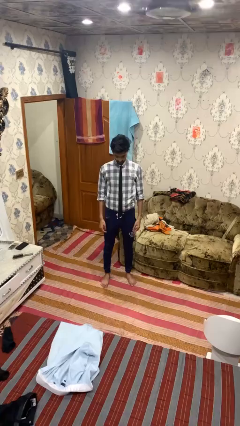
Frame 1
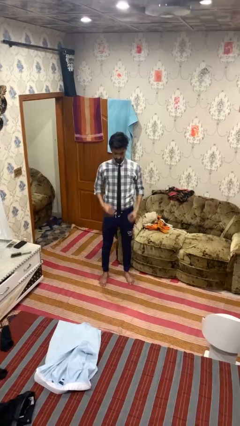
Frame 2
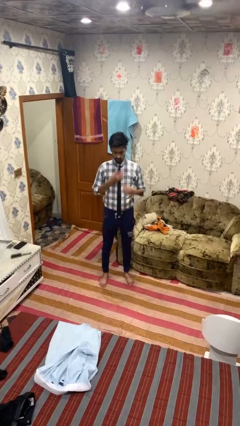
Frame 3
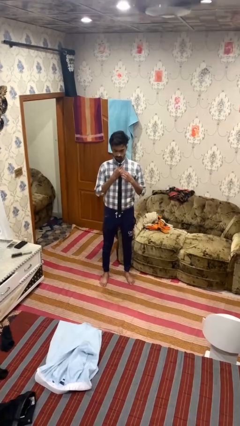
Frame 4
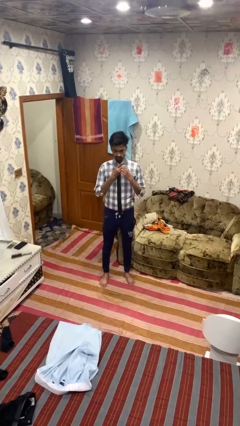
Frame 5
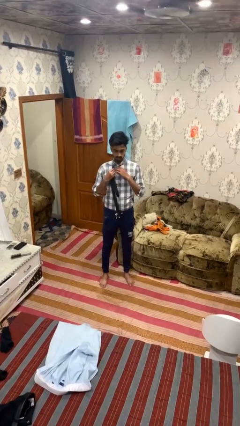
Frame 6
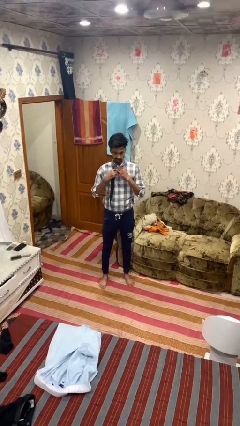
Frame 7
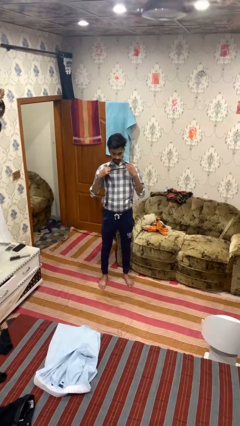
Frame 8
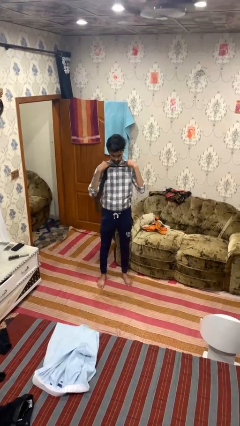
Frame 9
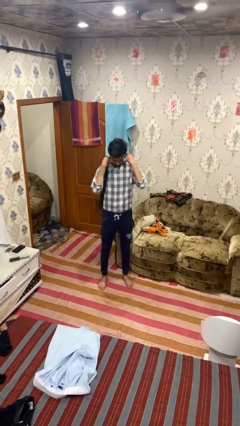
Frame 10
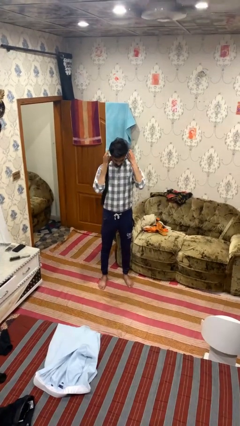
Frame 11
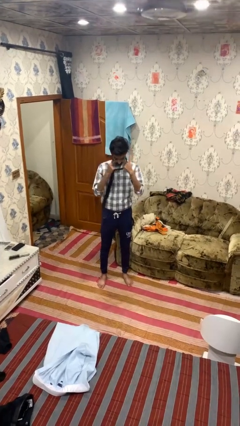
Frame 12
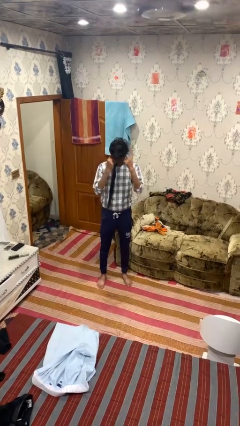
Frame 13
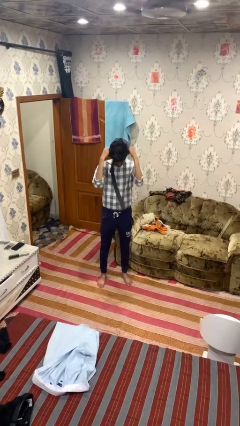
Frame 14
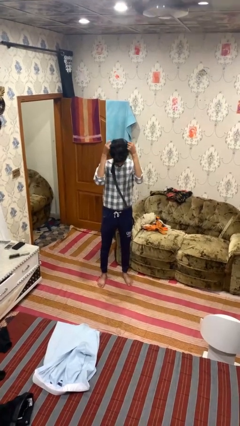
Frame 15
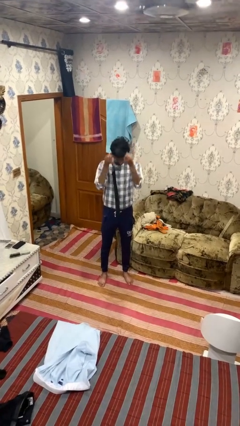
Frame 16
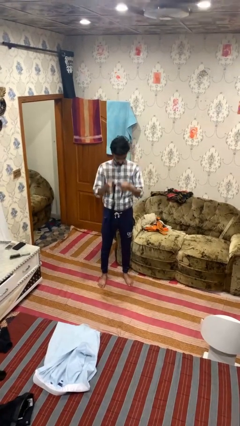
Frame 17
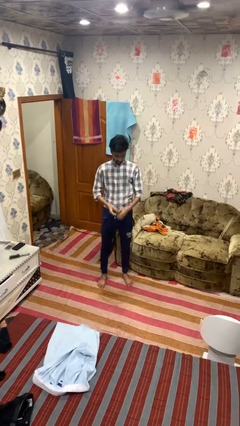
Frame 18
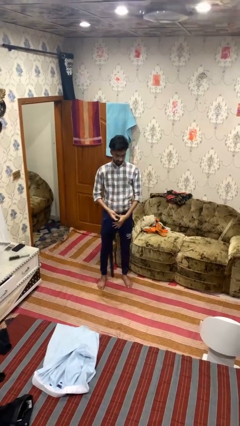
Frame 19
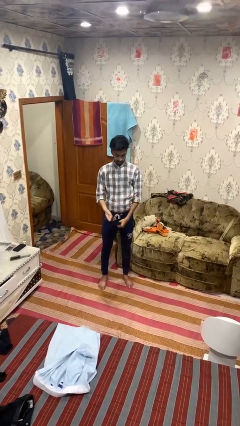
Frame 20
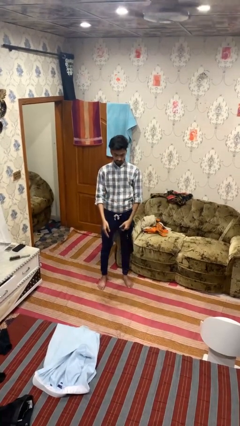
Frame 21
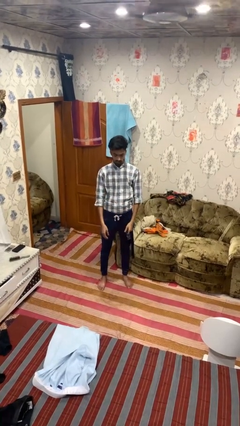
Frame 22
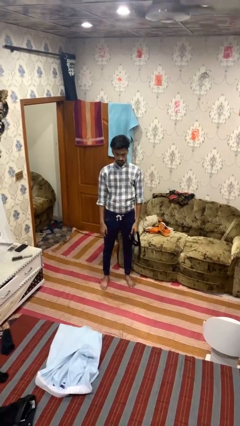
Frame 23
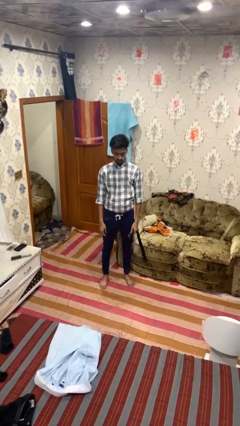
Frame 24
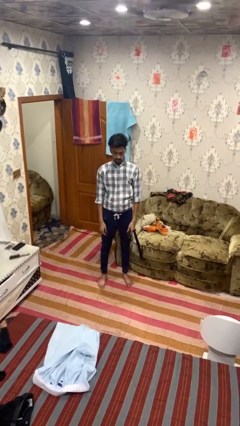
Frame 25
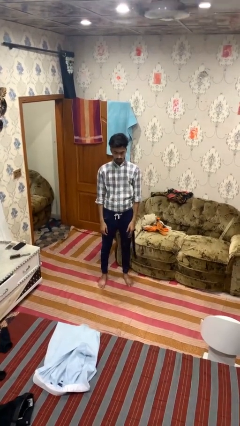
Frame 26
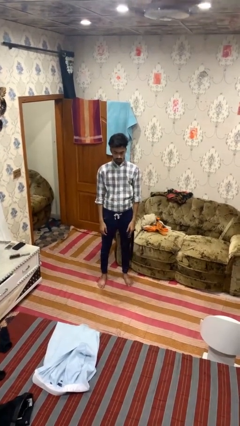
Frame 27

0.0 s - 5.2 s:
person takes off necktie

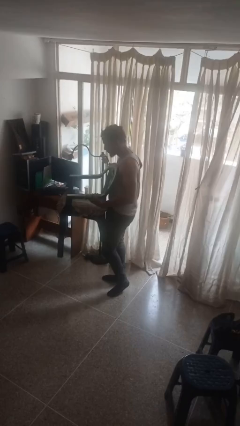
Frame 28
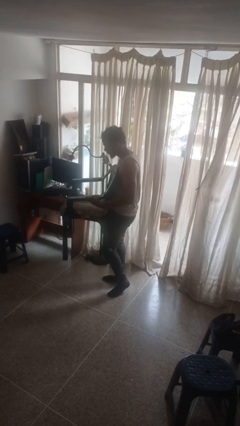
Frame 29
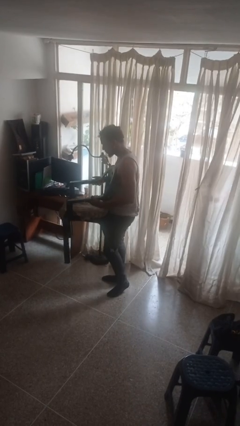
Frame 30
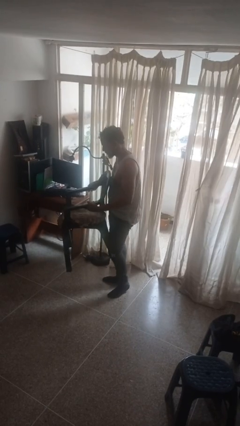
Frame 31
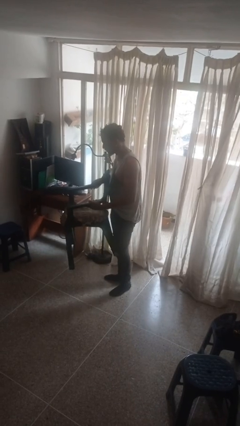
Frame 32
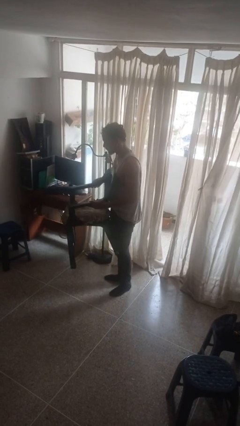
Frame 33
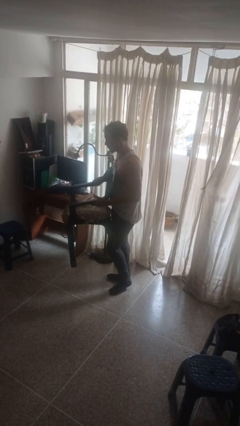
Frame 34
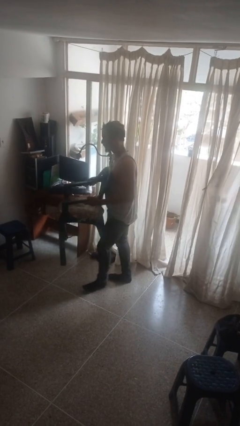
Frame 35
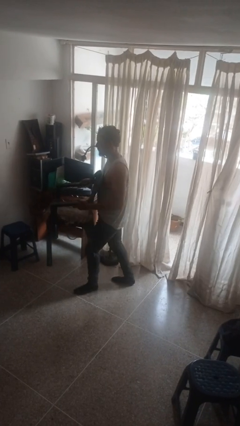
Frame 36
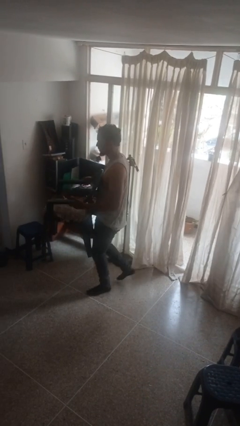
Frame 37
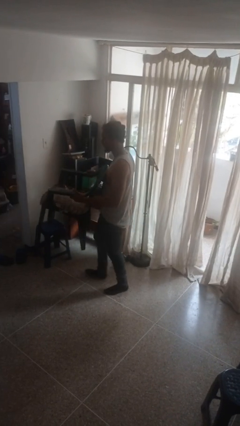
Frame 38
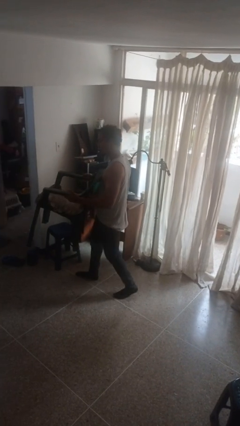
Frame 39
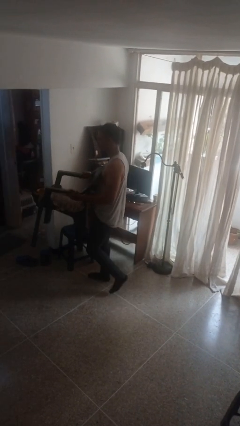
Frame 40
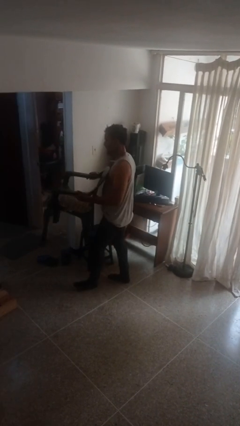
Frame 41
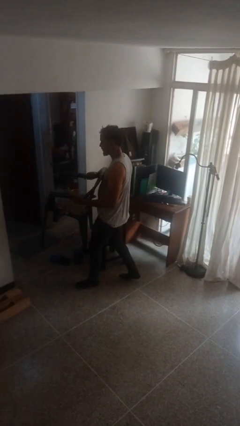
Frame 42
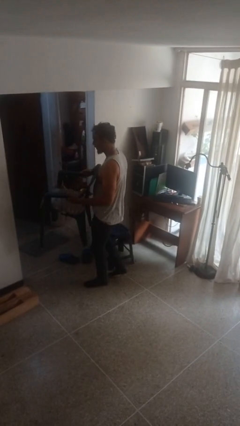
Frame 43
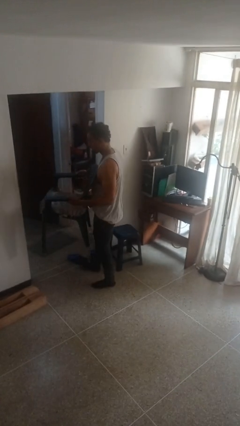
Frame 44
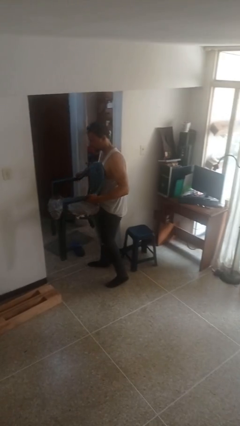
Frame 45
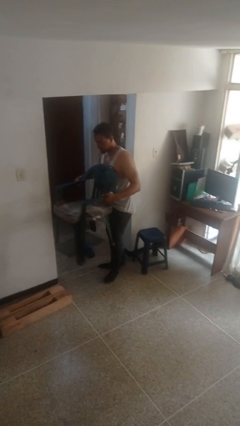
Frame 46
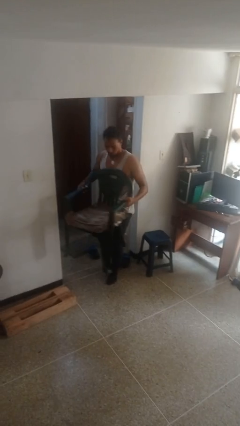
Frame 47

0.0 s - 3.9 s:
person carries furniture

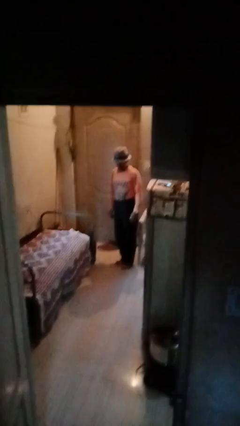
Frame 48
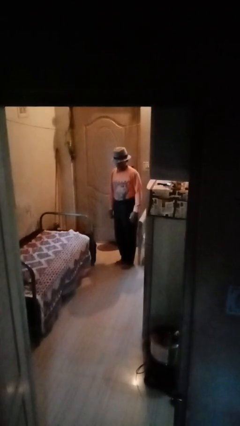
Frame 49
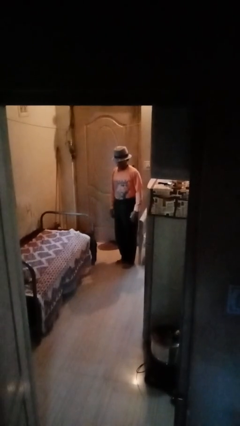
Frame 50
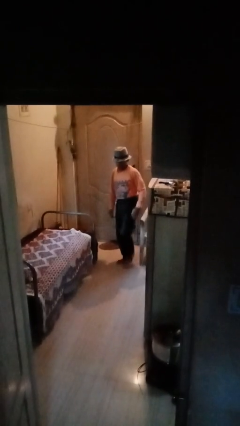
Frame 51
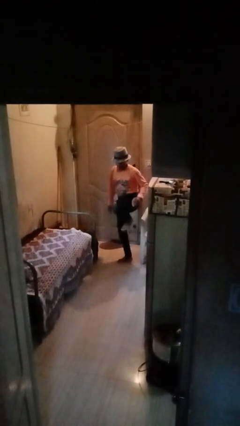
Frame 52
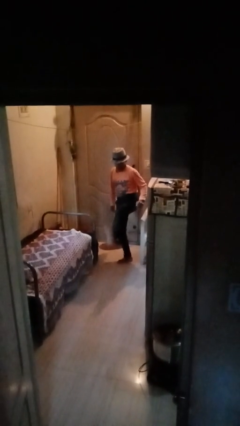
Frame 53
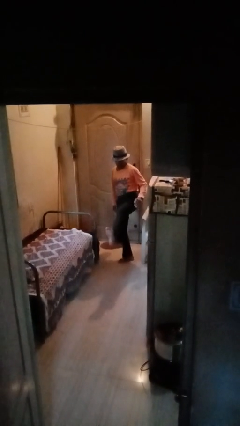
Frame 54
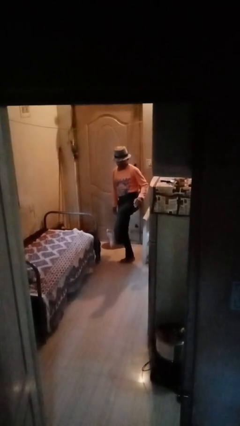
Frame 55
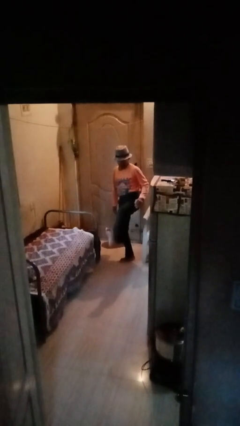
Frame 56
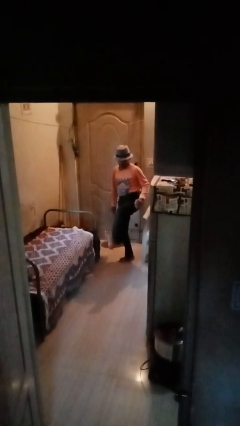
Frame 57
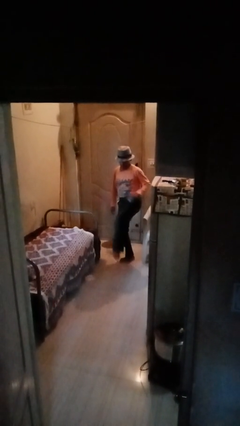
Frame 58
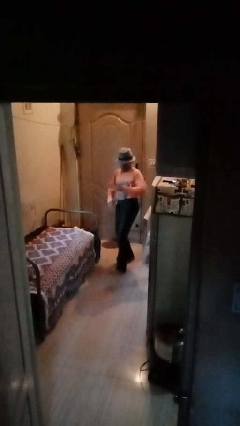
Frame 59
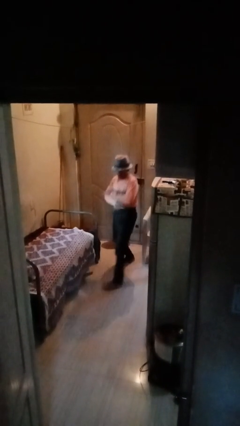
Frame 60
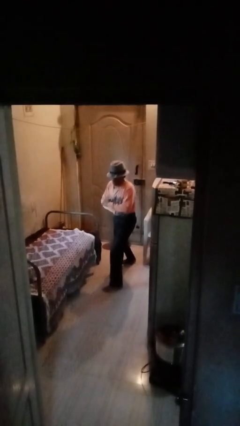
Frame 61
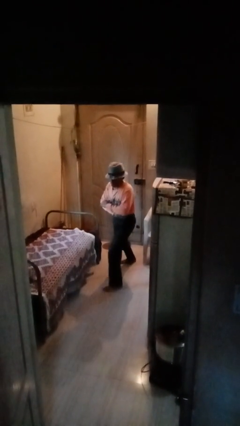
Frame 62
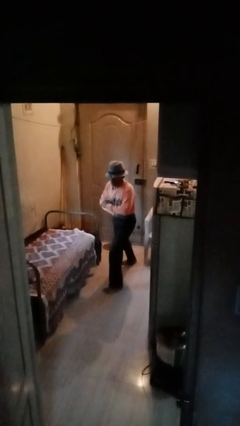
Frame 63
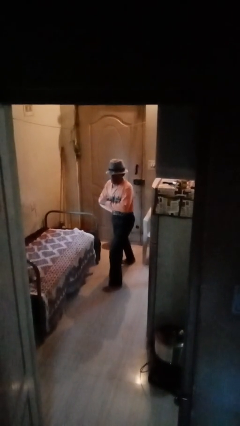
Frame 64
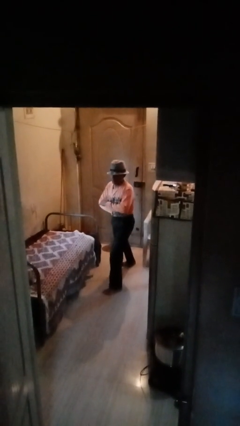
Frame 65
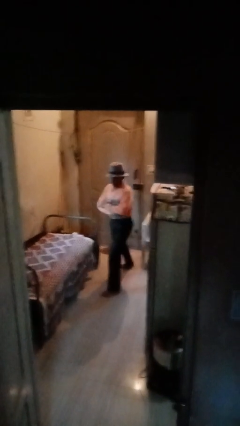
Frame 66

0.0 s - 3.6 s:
person karate kicks

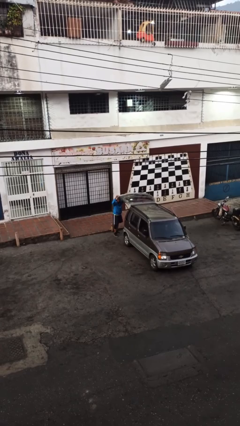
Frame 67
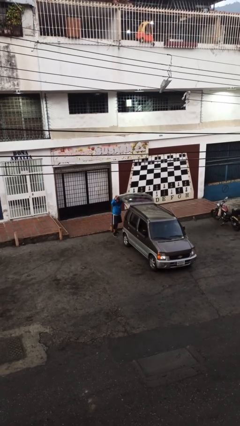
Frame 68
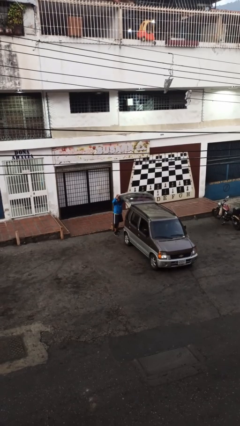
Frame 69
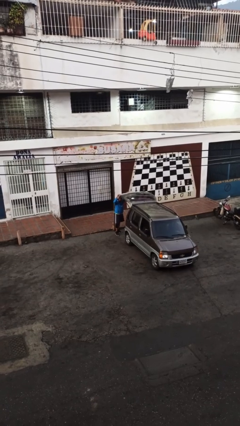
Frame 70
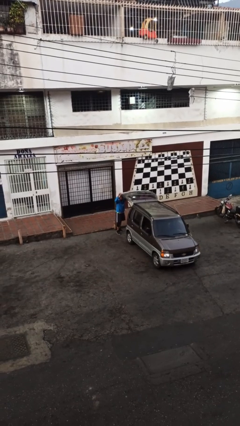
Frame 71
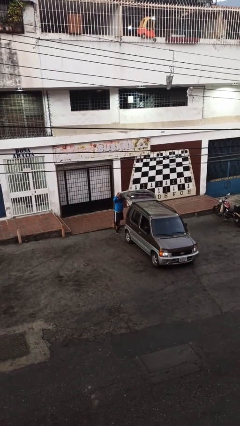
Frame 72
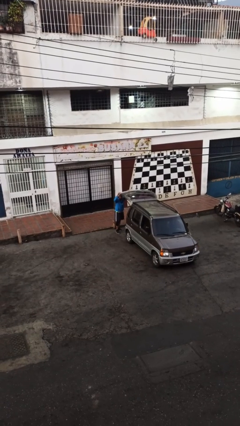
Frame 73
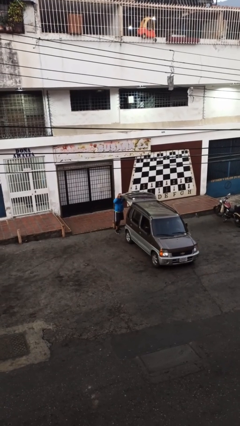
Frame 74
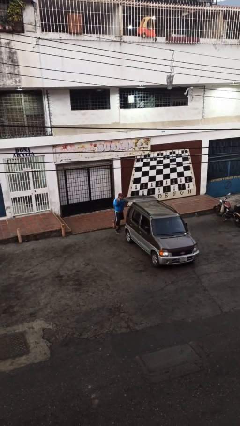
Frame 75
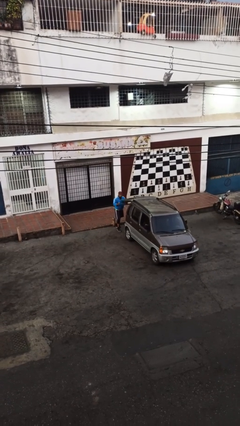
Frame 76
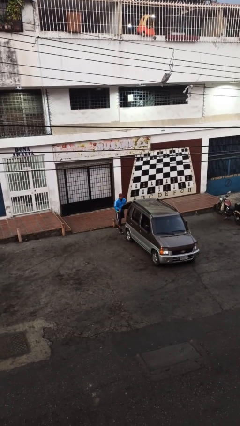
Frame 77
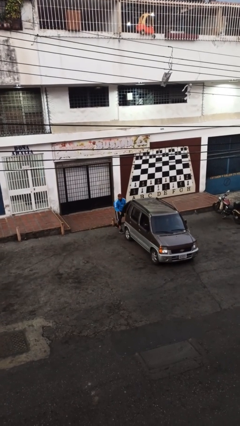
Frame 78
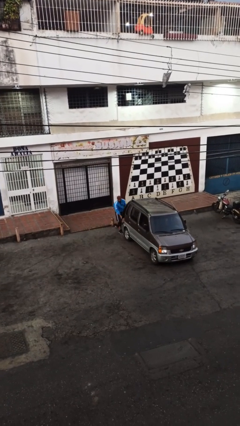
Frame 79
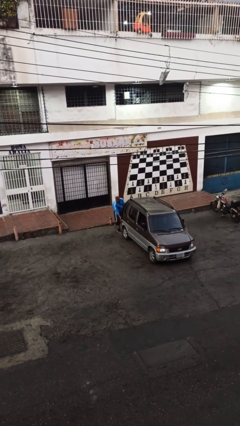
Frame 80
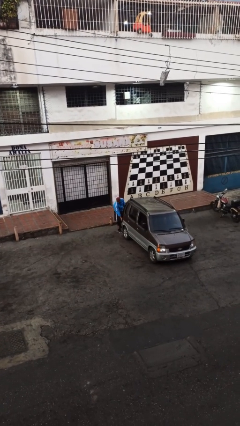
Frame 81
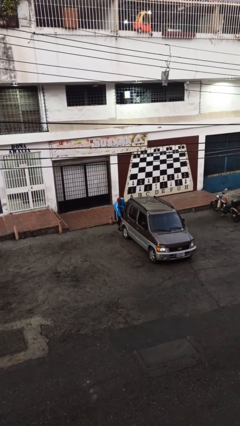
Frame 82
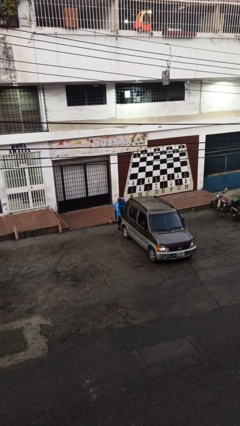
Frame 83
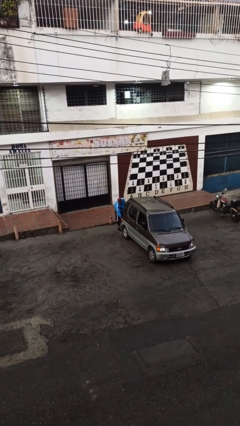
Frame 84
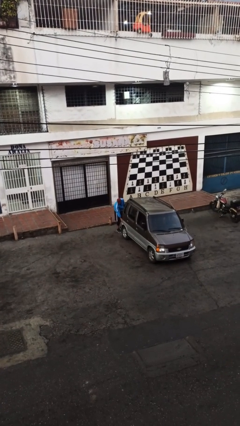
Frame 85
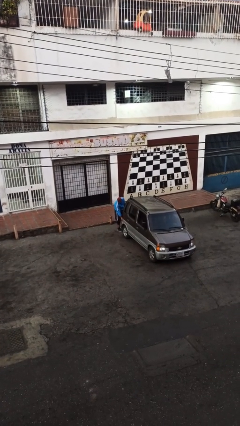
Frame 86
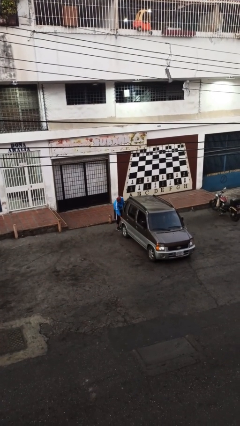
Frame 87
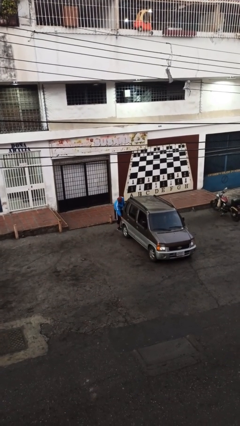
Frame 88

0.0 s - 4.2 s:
person closes car trunk

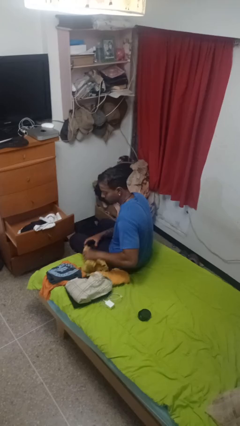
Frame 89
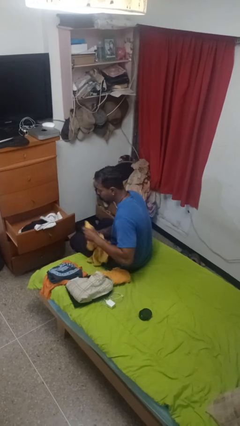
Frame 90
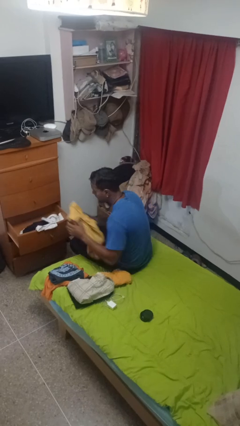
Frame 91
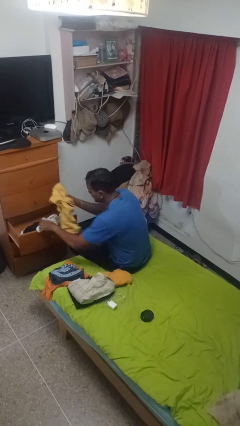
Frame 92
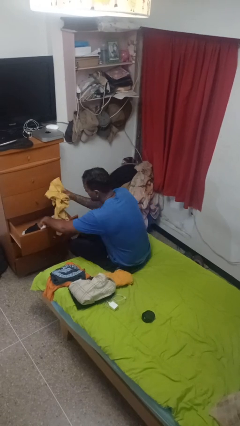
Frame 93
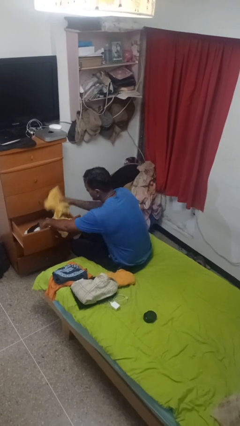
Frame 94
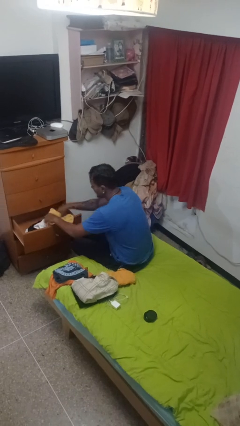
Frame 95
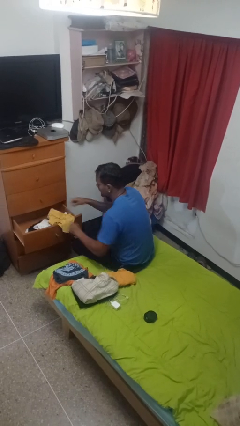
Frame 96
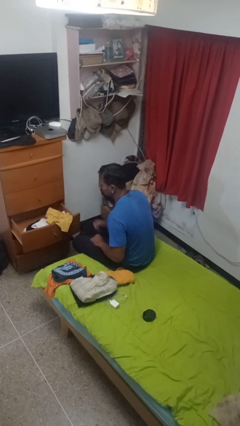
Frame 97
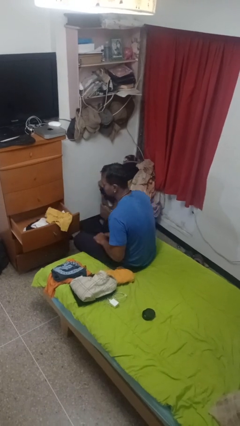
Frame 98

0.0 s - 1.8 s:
person puts clothes into dresser
